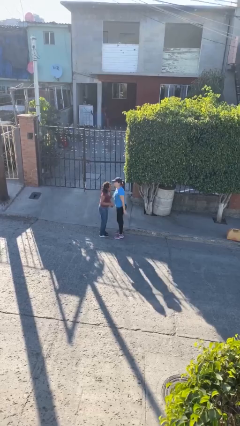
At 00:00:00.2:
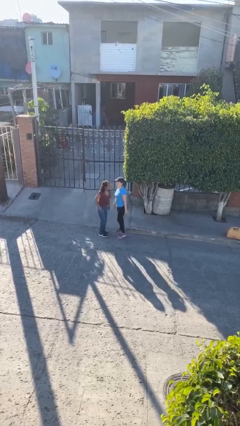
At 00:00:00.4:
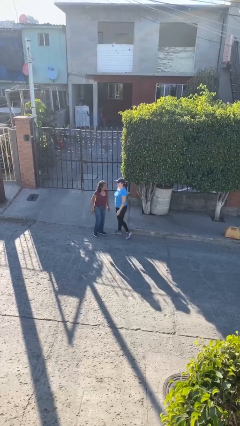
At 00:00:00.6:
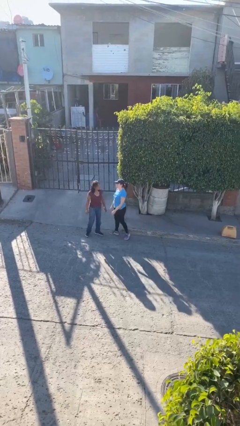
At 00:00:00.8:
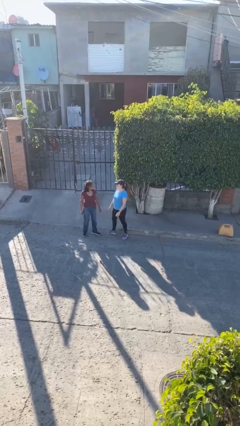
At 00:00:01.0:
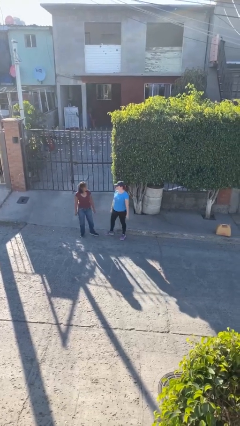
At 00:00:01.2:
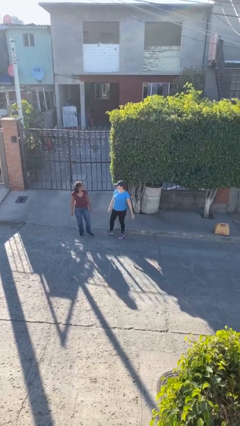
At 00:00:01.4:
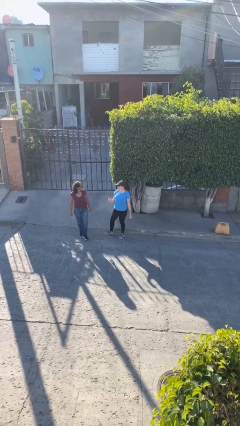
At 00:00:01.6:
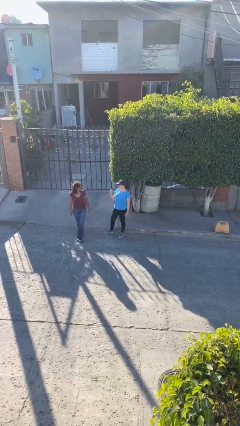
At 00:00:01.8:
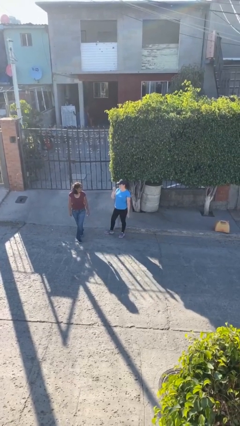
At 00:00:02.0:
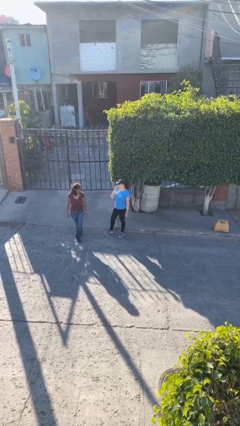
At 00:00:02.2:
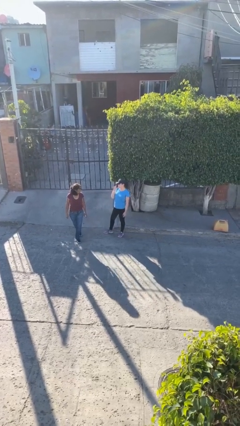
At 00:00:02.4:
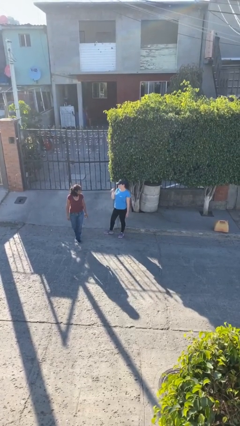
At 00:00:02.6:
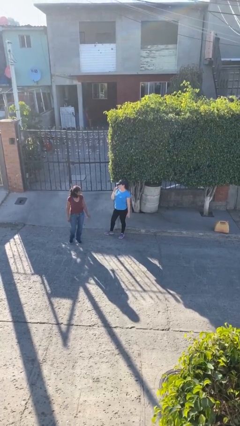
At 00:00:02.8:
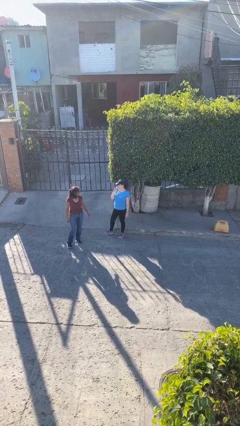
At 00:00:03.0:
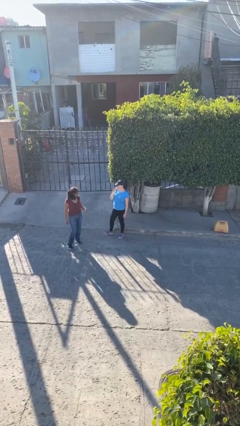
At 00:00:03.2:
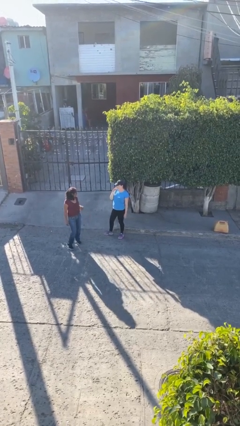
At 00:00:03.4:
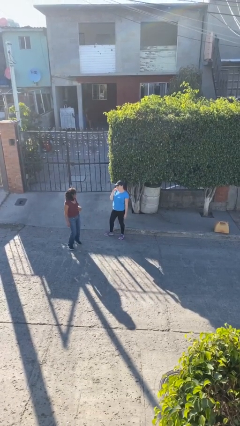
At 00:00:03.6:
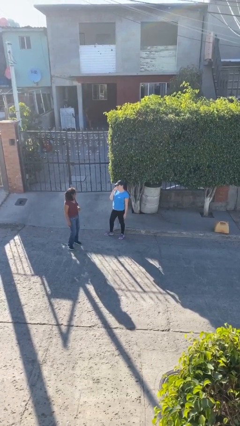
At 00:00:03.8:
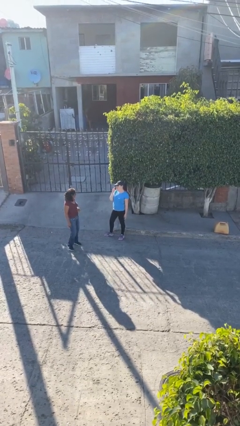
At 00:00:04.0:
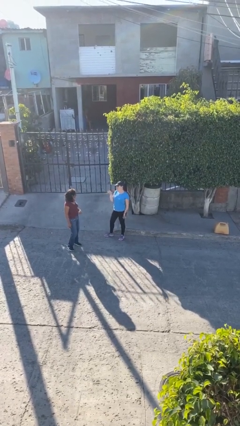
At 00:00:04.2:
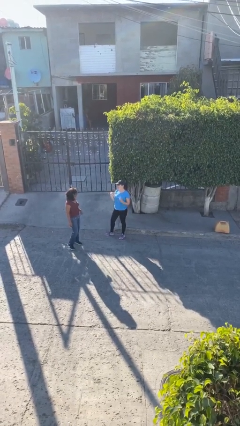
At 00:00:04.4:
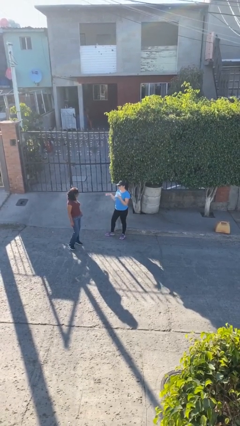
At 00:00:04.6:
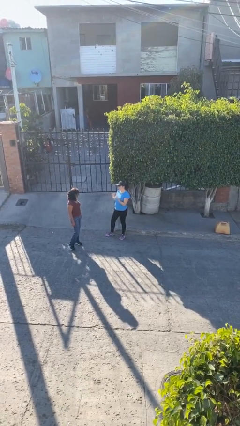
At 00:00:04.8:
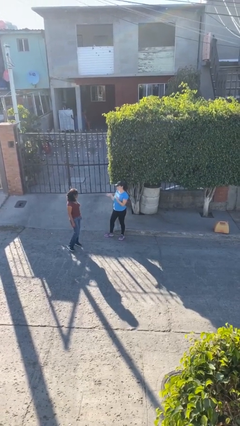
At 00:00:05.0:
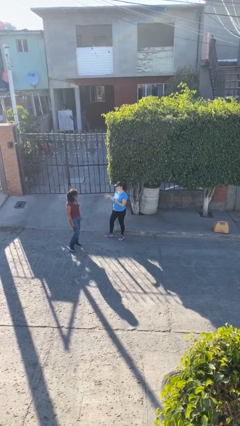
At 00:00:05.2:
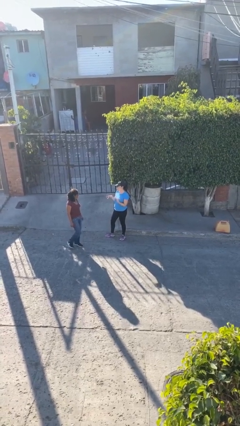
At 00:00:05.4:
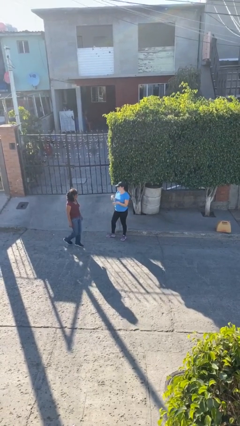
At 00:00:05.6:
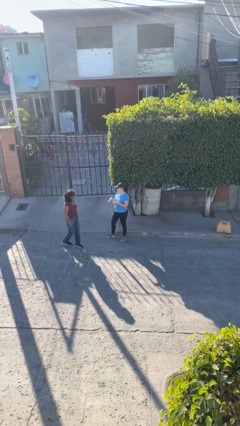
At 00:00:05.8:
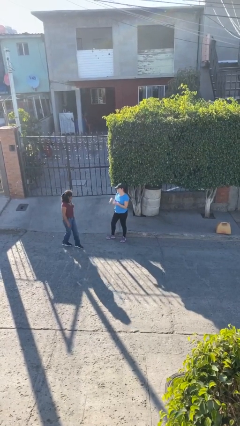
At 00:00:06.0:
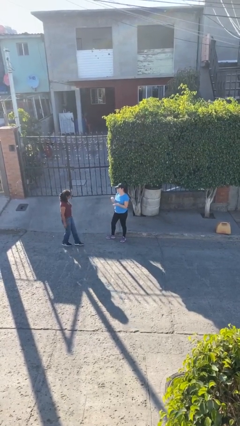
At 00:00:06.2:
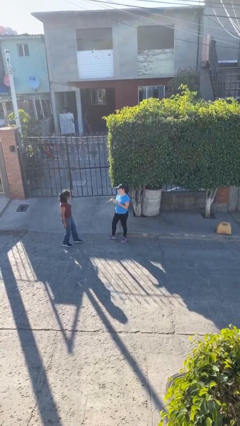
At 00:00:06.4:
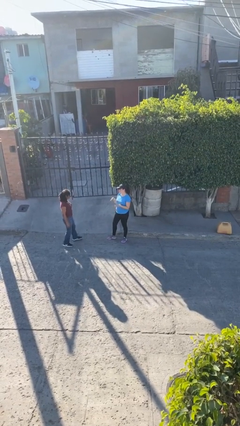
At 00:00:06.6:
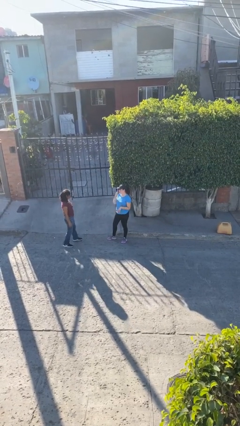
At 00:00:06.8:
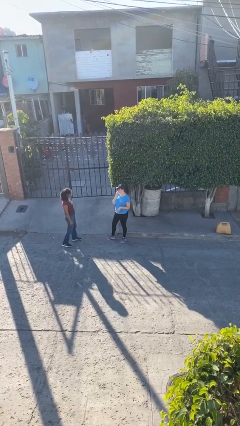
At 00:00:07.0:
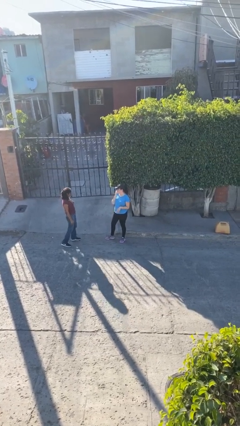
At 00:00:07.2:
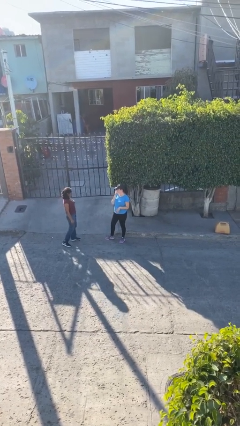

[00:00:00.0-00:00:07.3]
person talks to person

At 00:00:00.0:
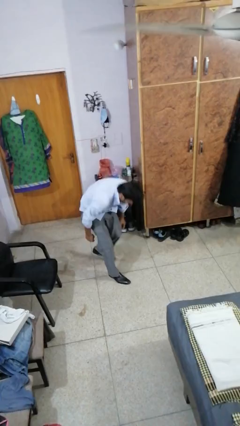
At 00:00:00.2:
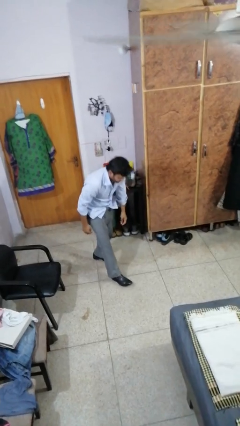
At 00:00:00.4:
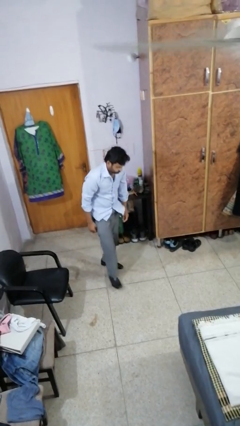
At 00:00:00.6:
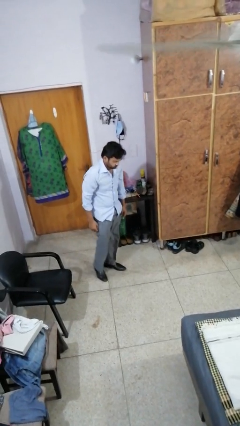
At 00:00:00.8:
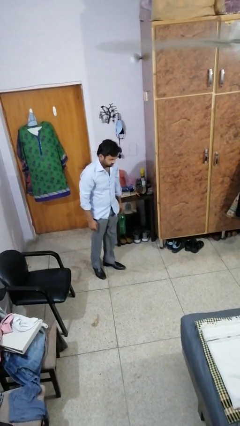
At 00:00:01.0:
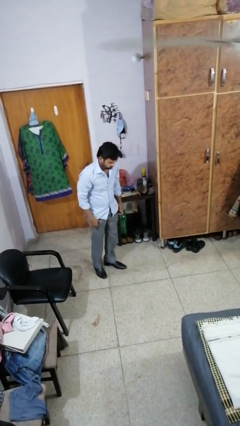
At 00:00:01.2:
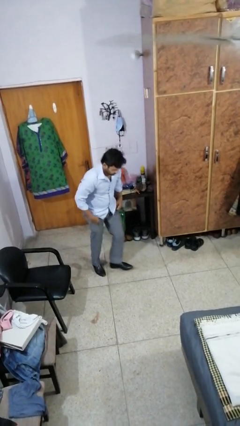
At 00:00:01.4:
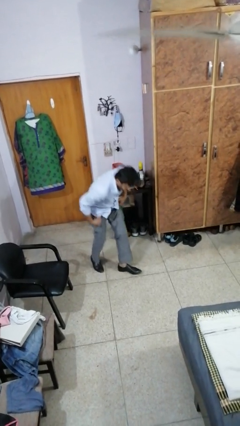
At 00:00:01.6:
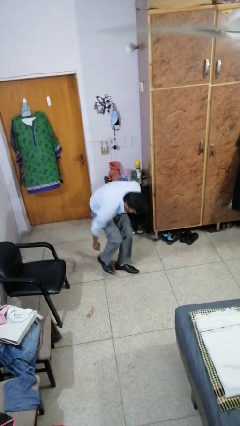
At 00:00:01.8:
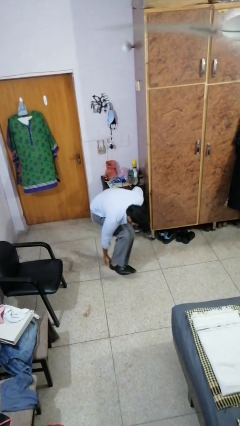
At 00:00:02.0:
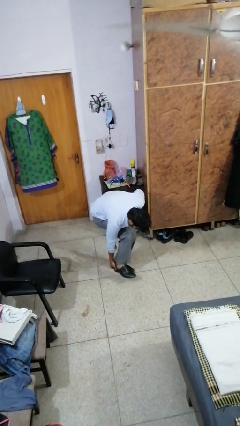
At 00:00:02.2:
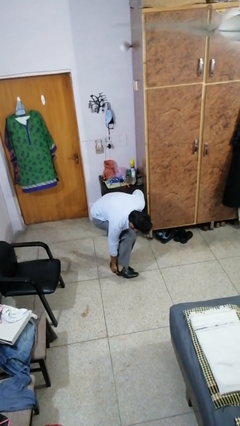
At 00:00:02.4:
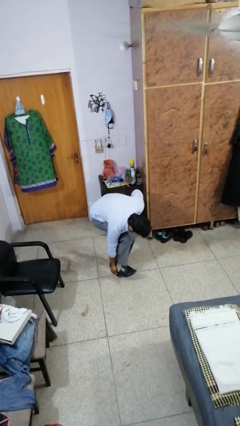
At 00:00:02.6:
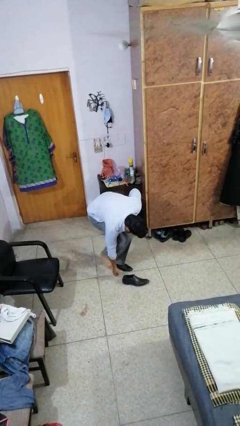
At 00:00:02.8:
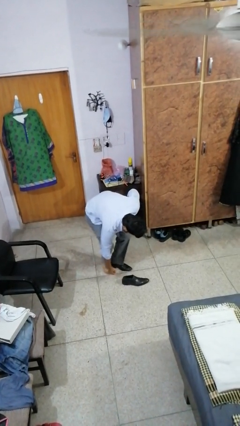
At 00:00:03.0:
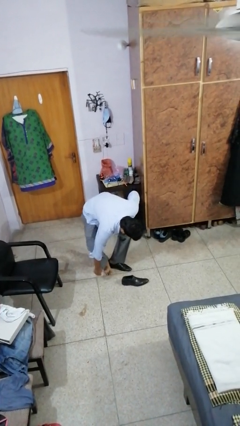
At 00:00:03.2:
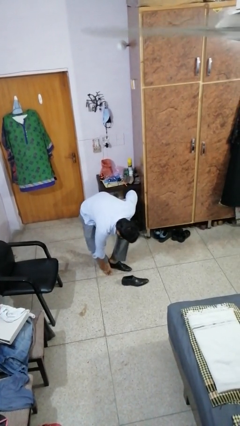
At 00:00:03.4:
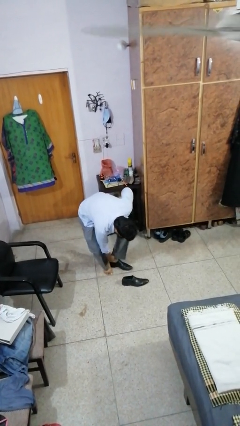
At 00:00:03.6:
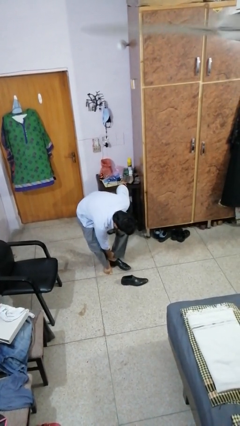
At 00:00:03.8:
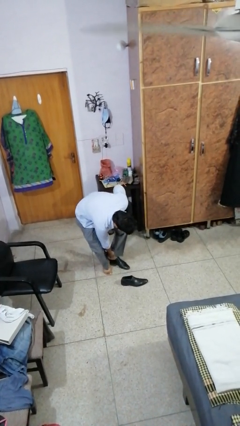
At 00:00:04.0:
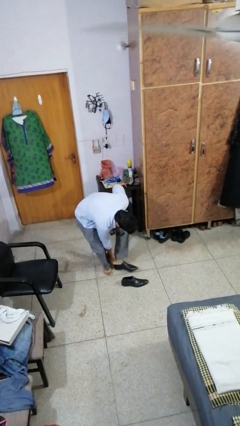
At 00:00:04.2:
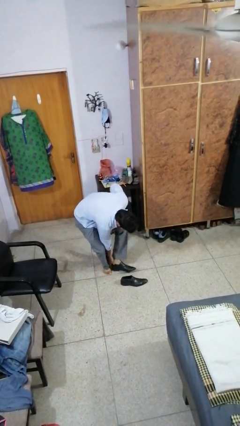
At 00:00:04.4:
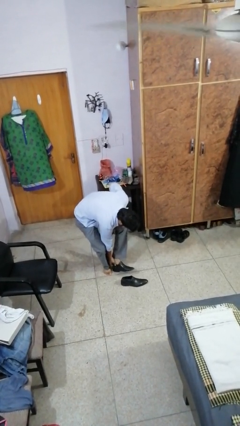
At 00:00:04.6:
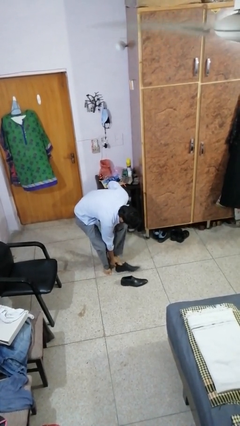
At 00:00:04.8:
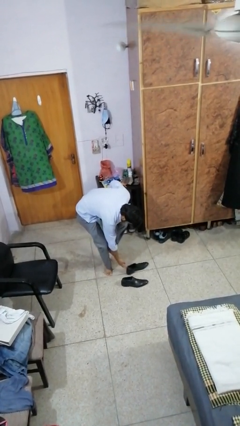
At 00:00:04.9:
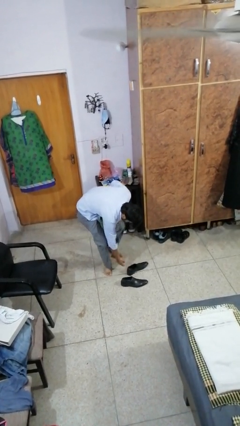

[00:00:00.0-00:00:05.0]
person takes off shoes

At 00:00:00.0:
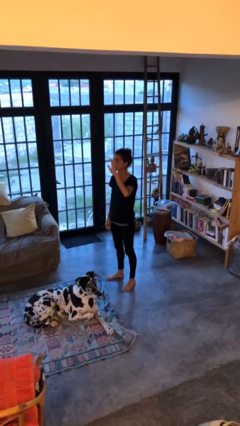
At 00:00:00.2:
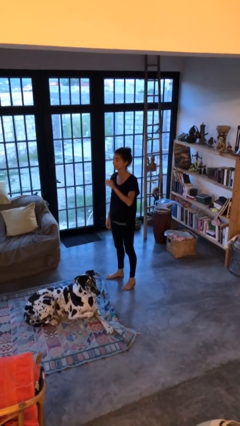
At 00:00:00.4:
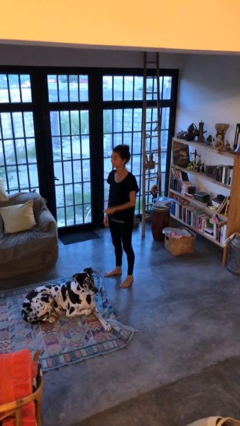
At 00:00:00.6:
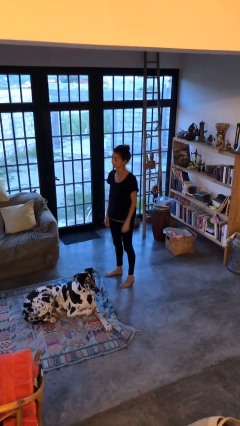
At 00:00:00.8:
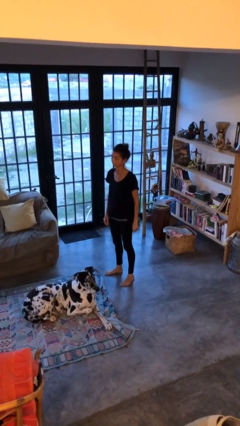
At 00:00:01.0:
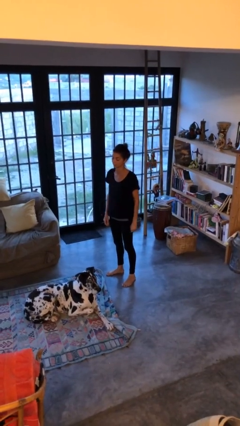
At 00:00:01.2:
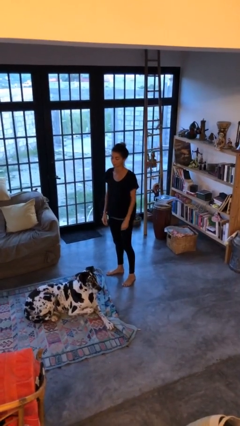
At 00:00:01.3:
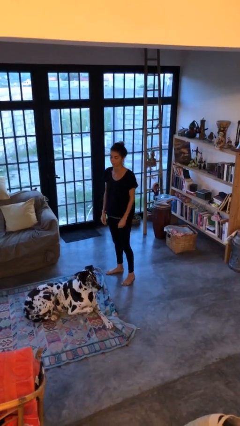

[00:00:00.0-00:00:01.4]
person gestures lower hand

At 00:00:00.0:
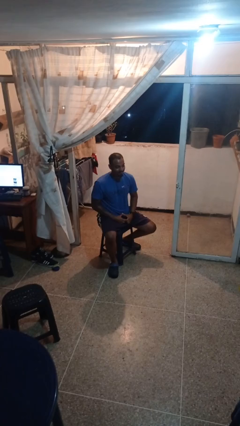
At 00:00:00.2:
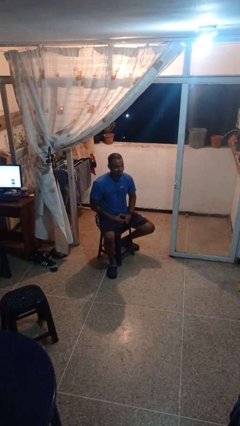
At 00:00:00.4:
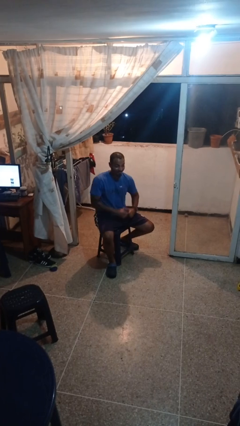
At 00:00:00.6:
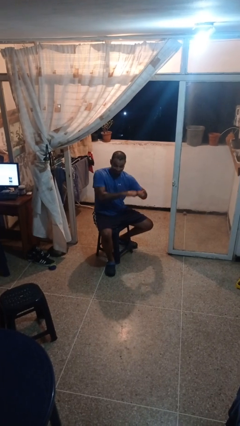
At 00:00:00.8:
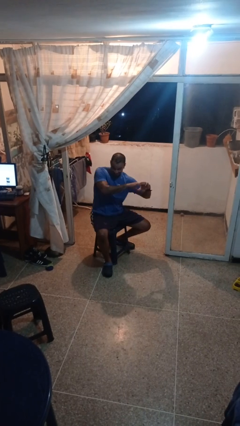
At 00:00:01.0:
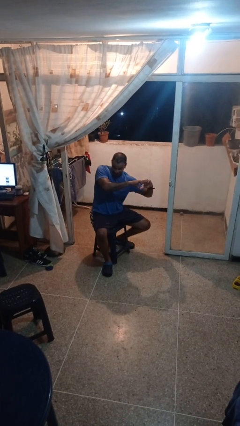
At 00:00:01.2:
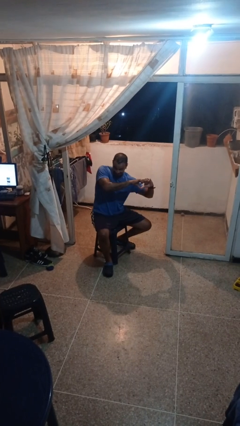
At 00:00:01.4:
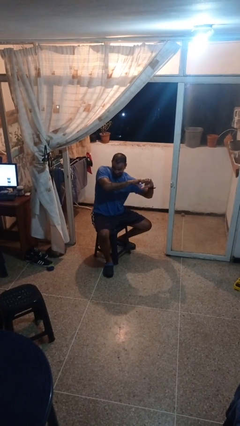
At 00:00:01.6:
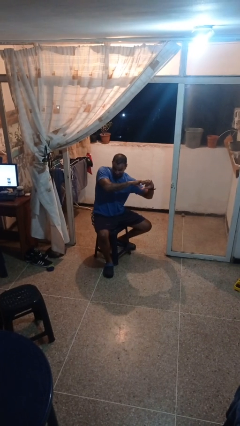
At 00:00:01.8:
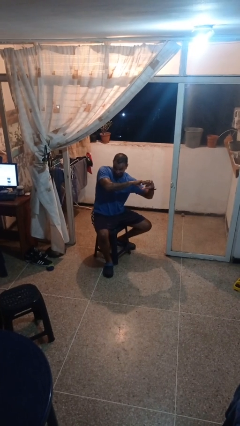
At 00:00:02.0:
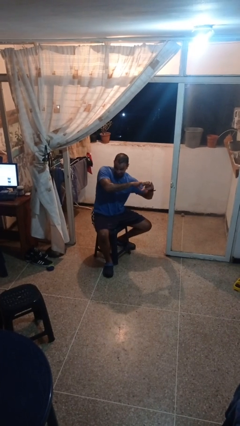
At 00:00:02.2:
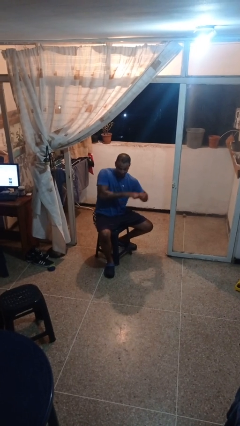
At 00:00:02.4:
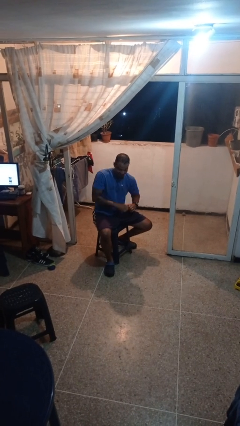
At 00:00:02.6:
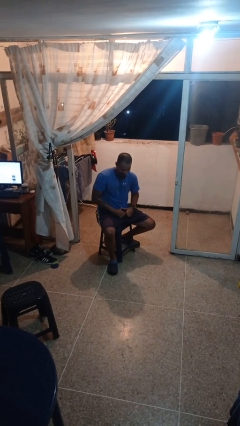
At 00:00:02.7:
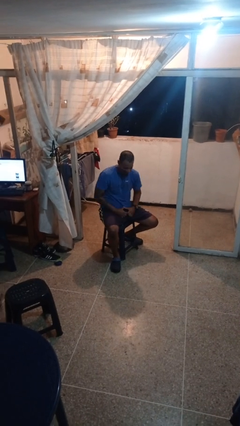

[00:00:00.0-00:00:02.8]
person gestures heart

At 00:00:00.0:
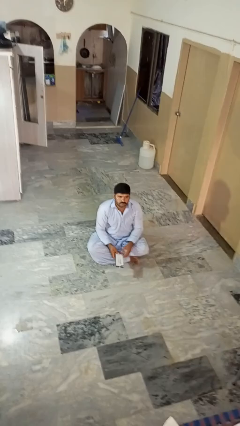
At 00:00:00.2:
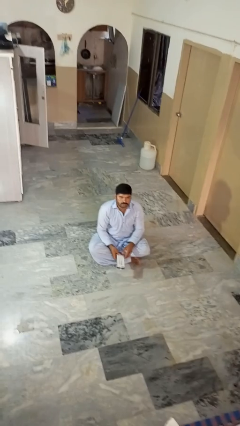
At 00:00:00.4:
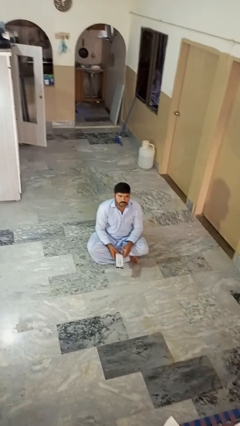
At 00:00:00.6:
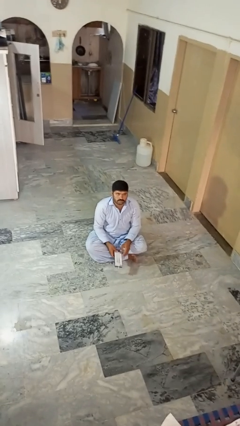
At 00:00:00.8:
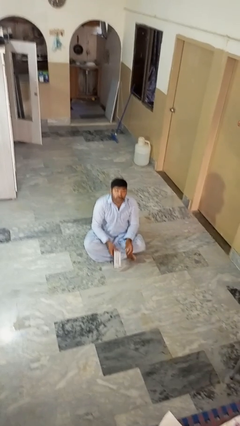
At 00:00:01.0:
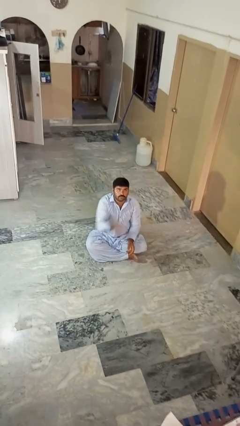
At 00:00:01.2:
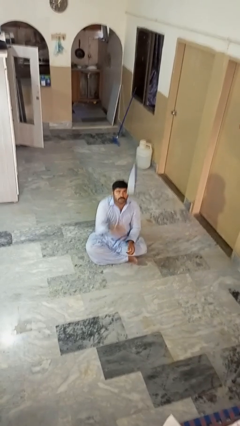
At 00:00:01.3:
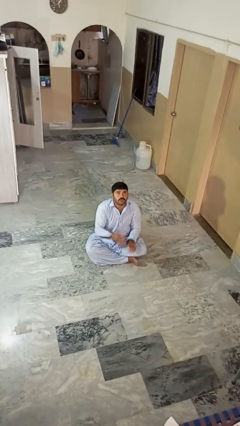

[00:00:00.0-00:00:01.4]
person drops object
